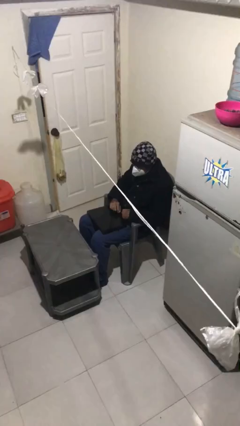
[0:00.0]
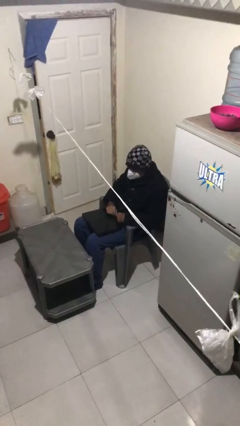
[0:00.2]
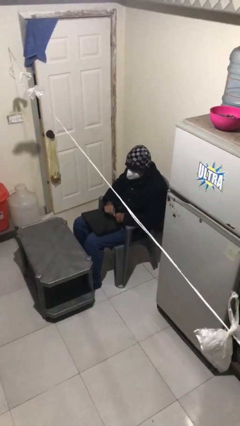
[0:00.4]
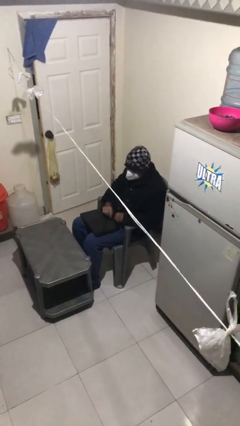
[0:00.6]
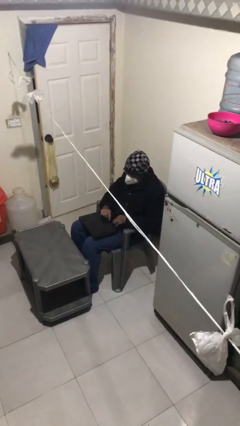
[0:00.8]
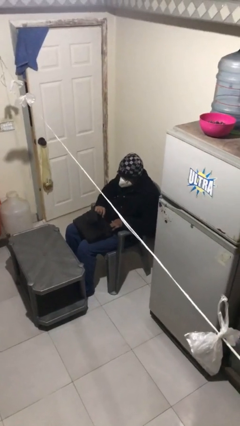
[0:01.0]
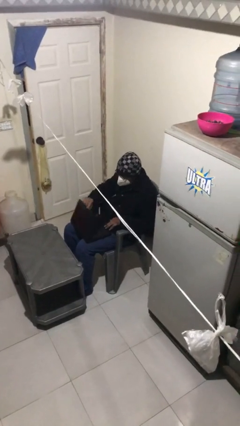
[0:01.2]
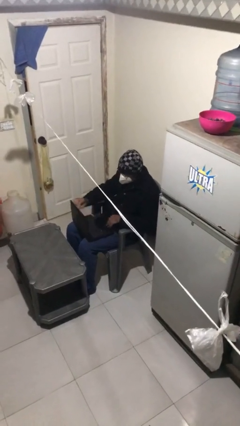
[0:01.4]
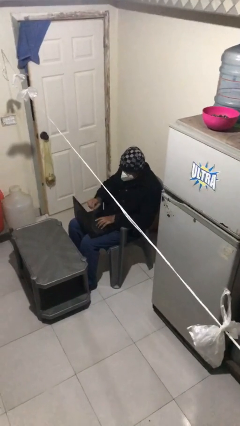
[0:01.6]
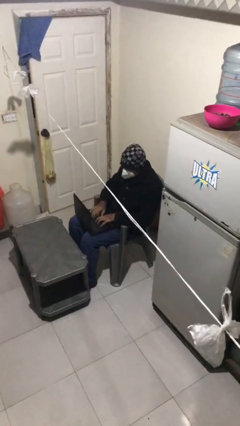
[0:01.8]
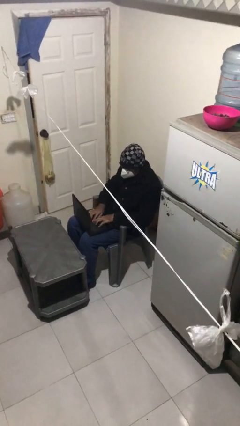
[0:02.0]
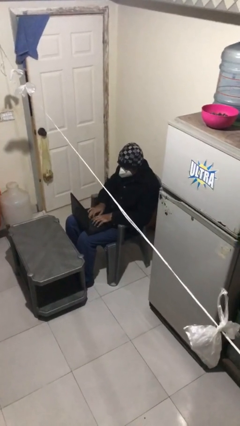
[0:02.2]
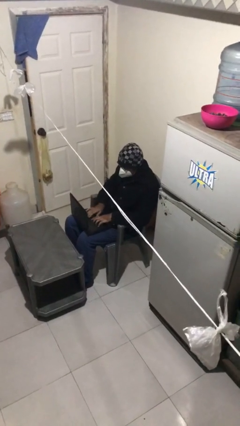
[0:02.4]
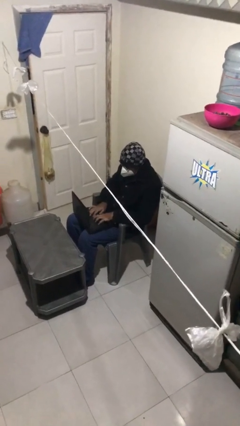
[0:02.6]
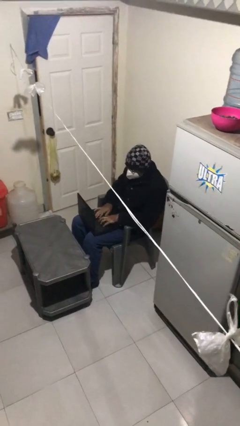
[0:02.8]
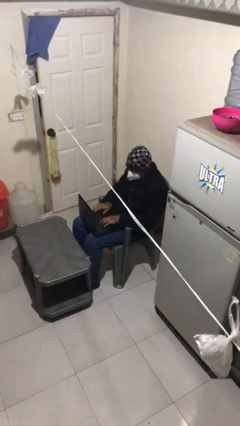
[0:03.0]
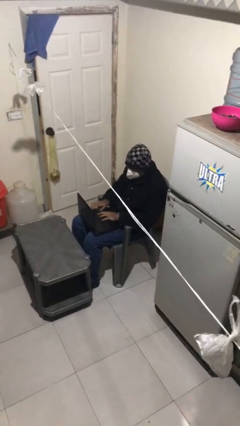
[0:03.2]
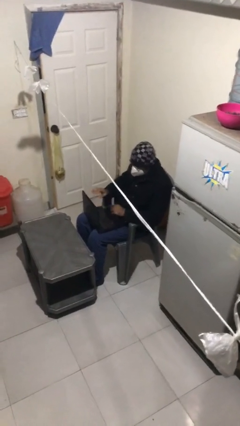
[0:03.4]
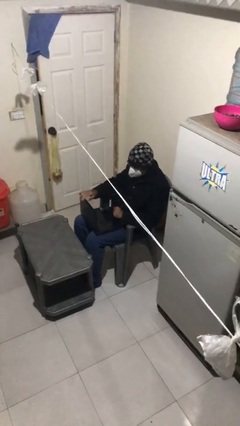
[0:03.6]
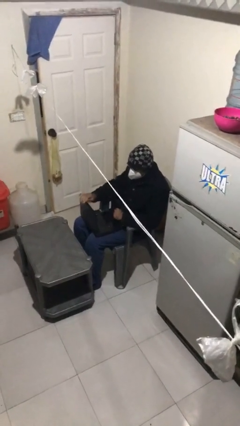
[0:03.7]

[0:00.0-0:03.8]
person interacts with laptop

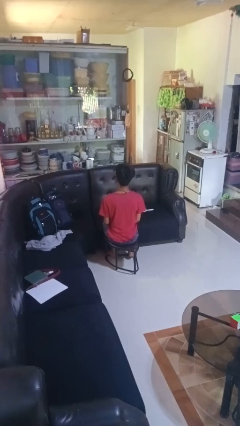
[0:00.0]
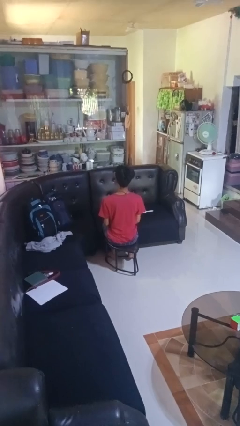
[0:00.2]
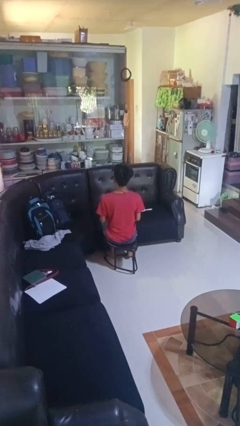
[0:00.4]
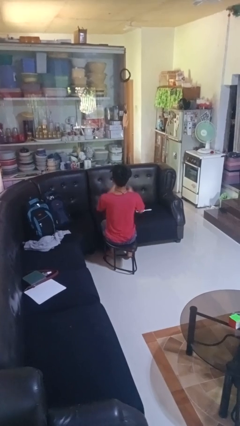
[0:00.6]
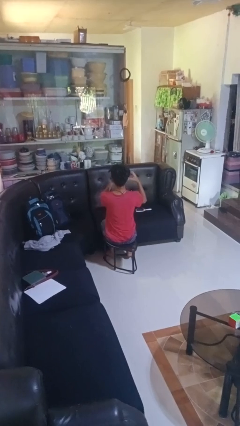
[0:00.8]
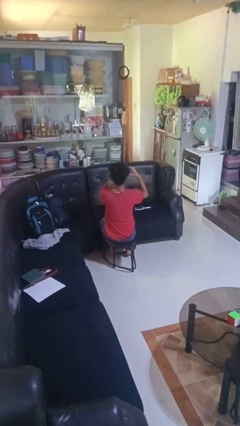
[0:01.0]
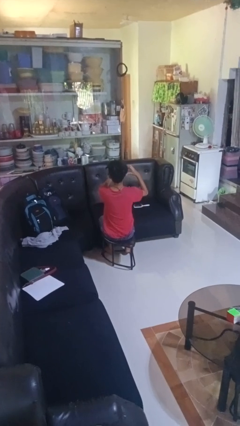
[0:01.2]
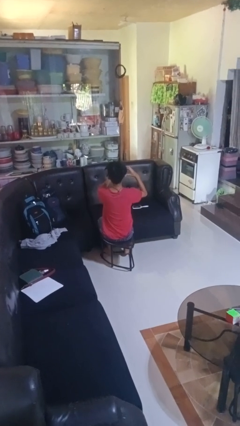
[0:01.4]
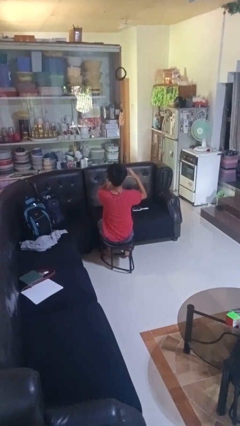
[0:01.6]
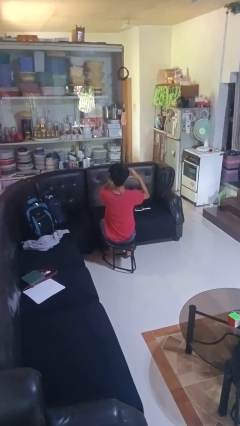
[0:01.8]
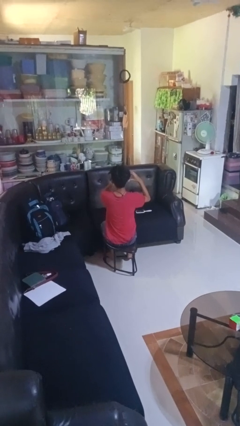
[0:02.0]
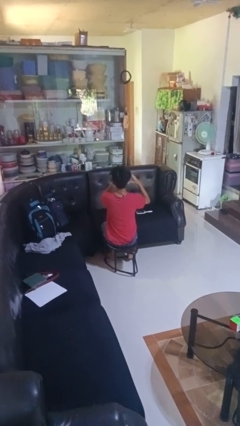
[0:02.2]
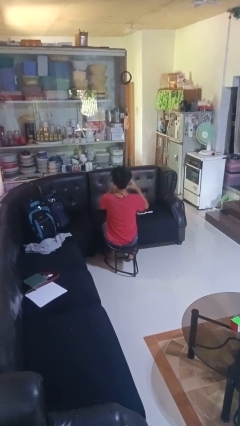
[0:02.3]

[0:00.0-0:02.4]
person gestures heart

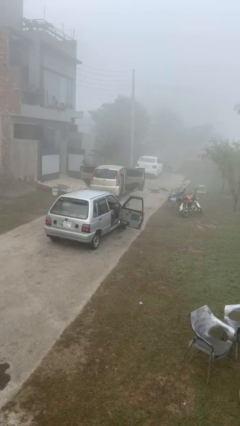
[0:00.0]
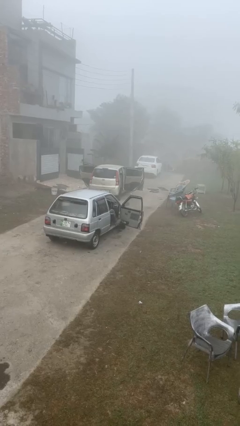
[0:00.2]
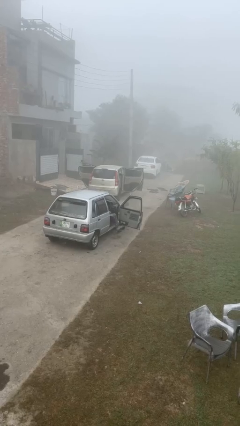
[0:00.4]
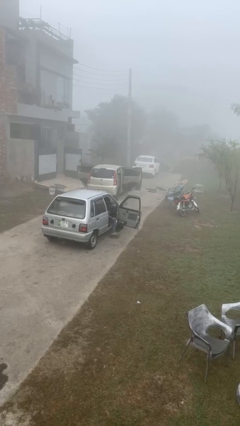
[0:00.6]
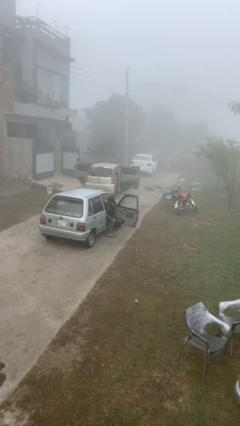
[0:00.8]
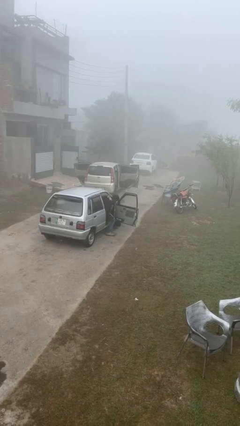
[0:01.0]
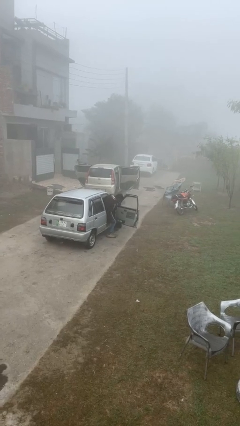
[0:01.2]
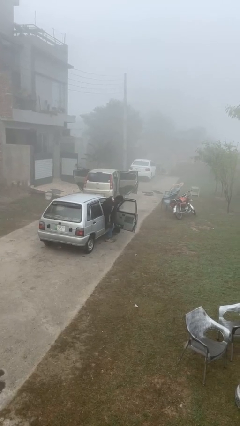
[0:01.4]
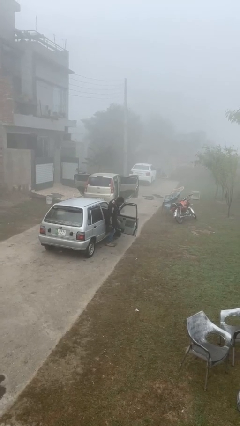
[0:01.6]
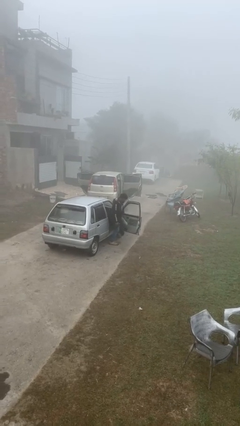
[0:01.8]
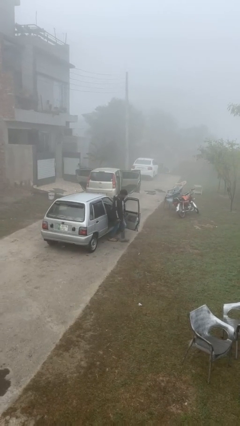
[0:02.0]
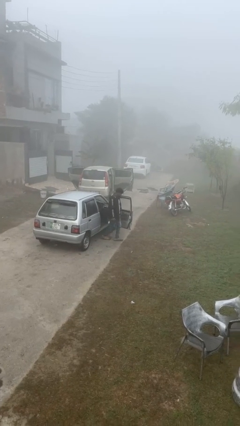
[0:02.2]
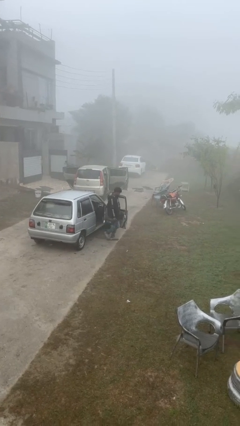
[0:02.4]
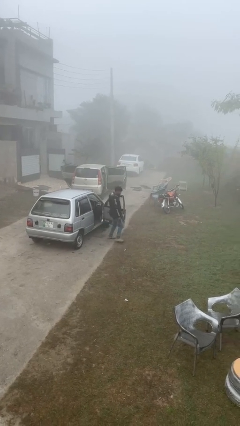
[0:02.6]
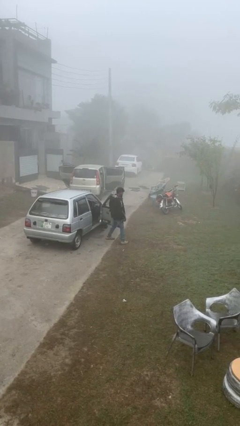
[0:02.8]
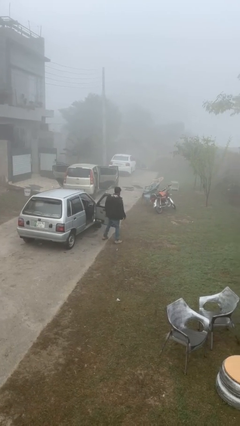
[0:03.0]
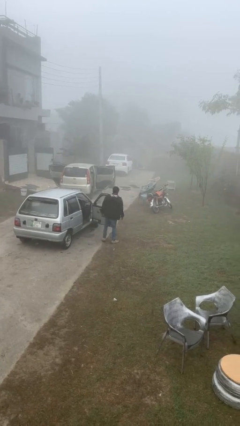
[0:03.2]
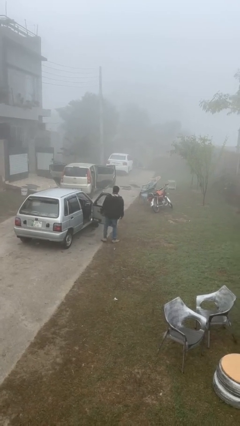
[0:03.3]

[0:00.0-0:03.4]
person exits car

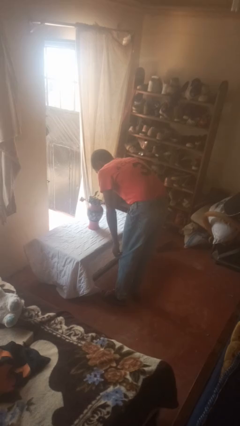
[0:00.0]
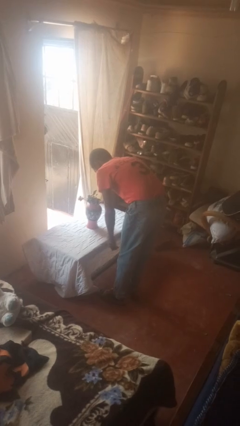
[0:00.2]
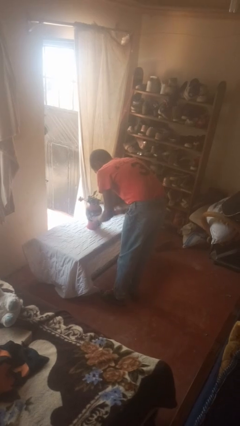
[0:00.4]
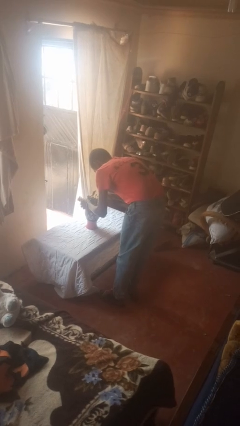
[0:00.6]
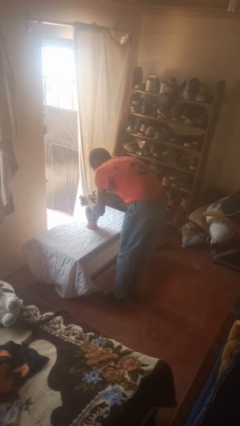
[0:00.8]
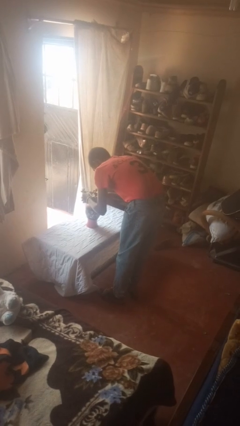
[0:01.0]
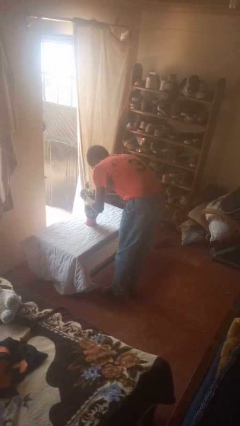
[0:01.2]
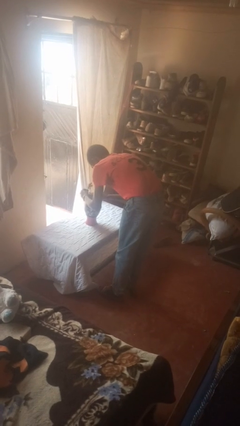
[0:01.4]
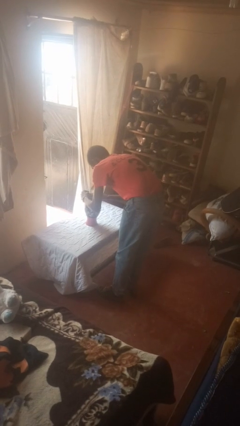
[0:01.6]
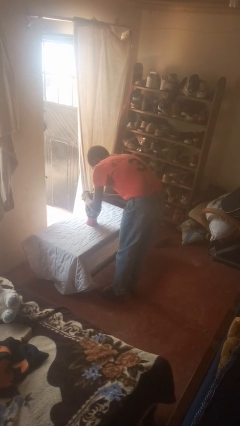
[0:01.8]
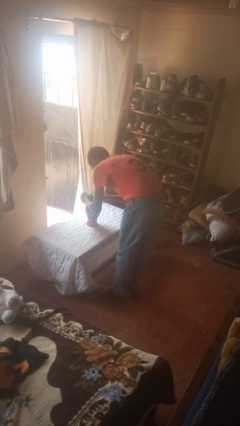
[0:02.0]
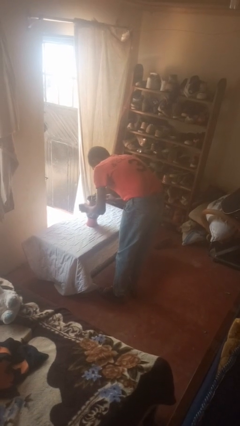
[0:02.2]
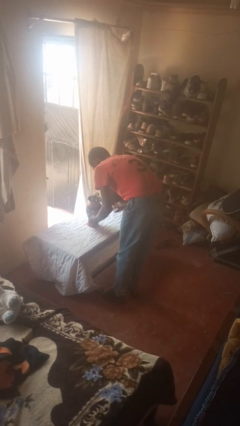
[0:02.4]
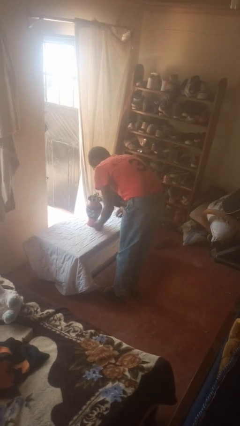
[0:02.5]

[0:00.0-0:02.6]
person arranges flowers in vase

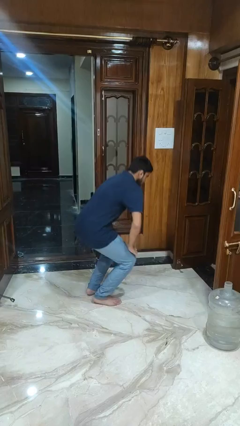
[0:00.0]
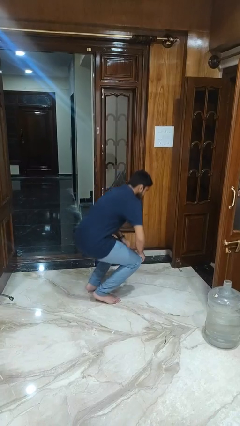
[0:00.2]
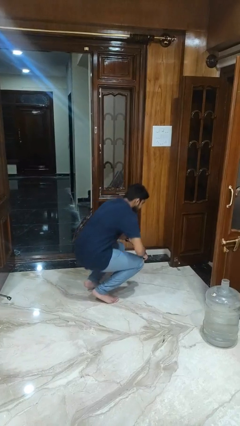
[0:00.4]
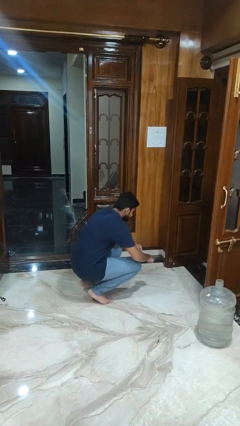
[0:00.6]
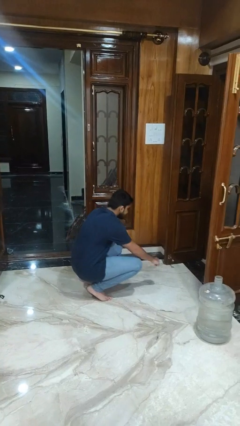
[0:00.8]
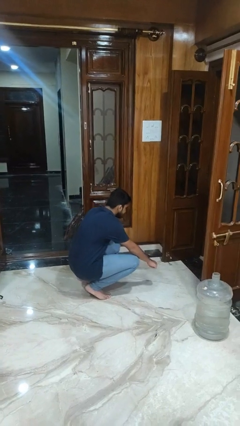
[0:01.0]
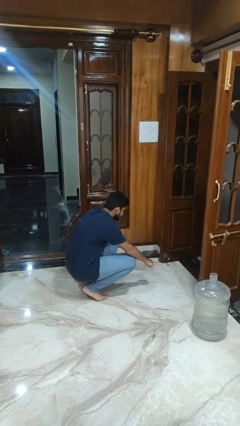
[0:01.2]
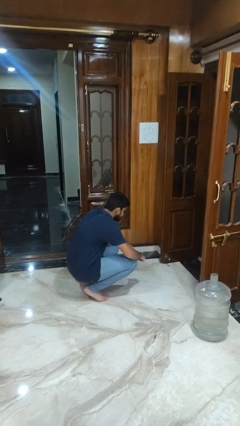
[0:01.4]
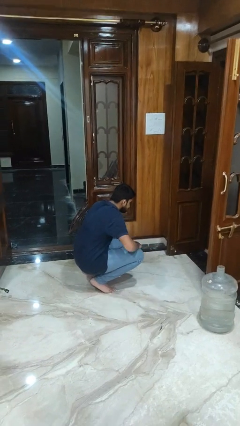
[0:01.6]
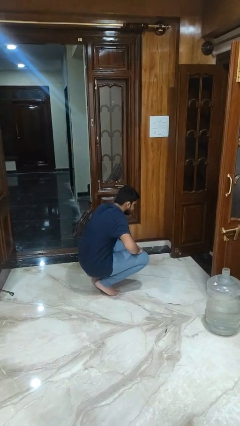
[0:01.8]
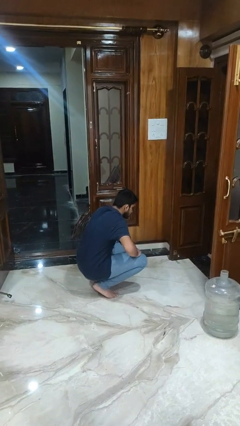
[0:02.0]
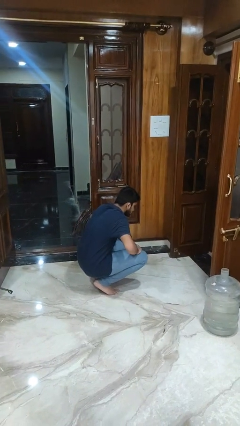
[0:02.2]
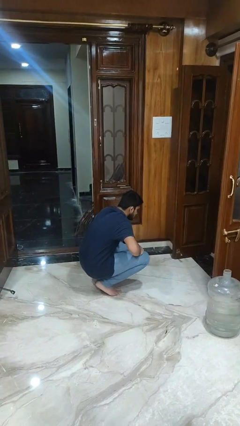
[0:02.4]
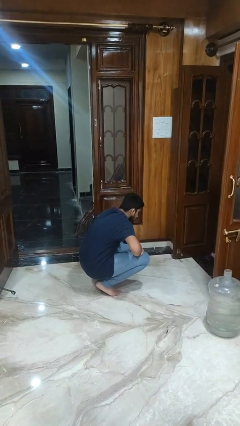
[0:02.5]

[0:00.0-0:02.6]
person squats

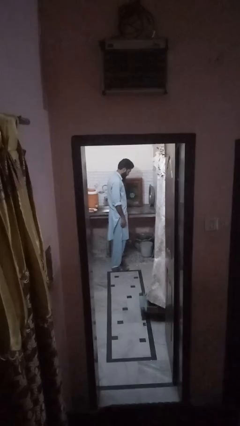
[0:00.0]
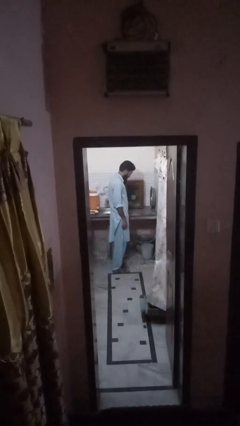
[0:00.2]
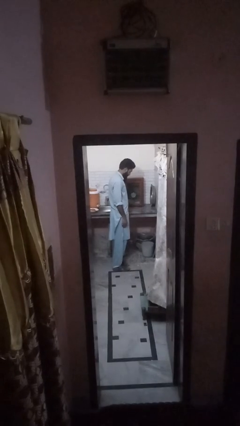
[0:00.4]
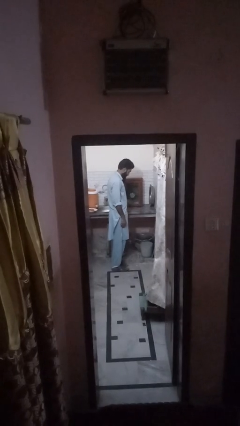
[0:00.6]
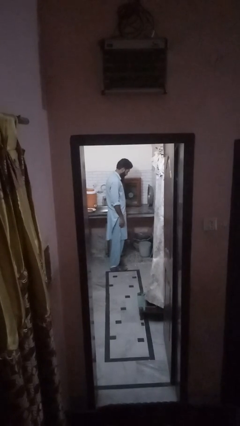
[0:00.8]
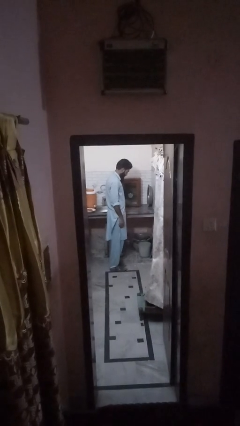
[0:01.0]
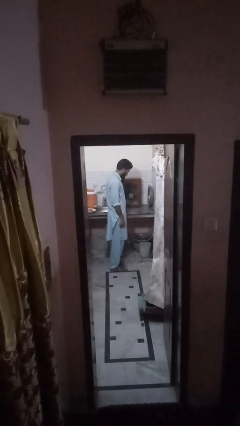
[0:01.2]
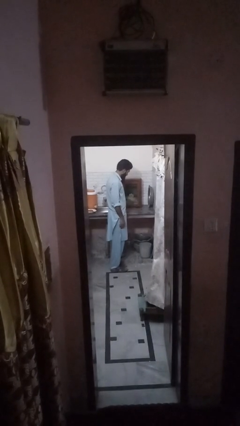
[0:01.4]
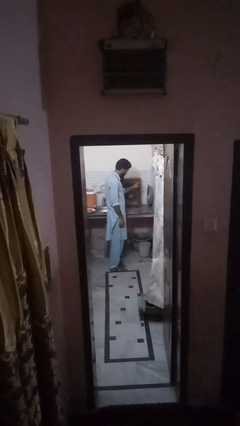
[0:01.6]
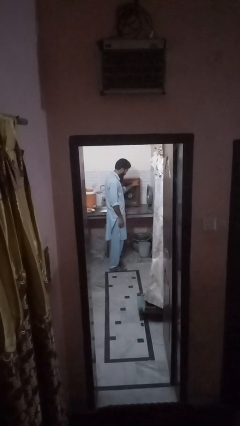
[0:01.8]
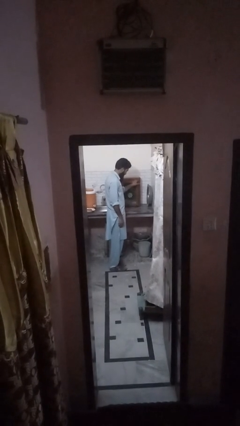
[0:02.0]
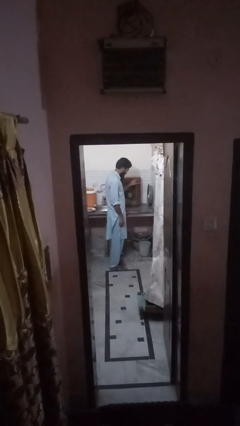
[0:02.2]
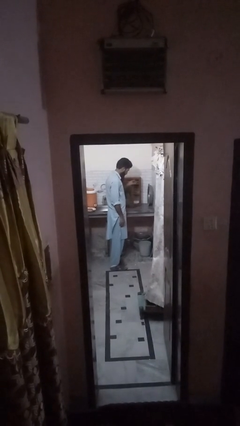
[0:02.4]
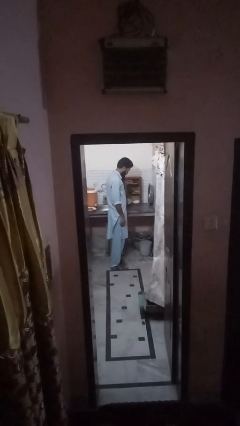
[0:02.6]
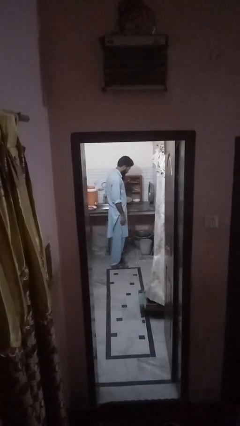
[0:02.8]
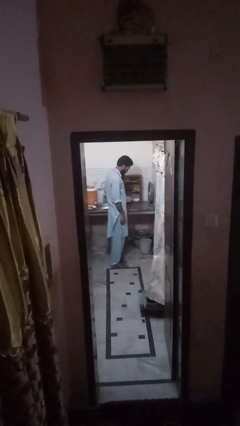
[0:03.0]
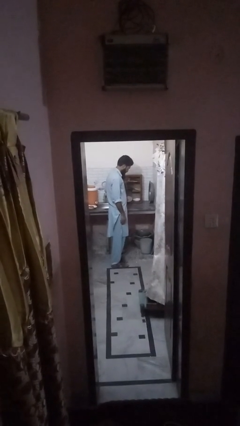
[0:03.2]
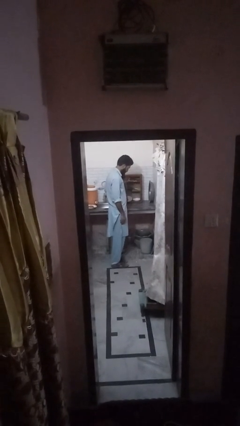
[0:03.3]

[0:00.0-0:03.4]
person opens cabinet
